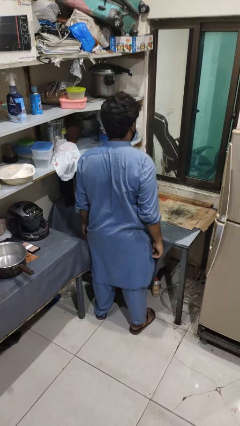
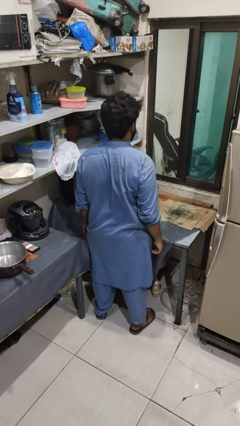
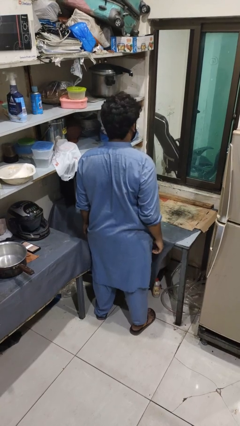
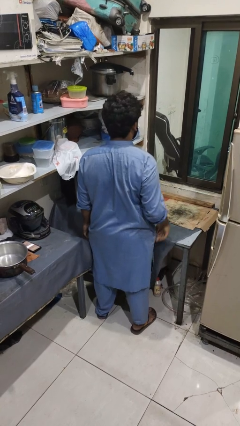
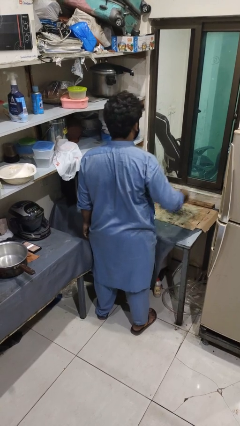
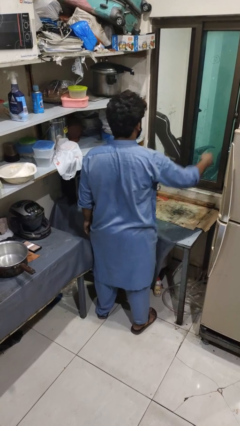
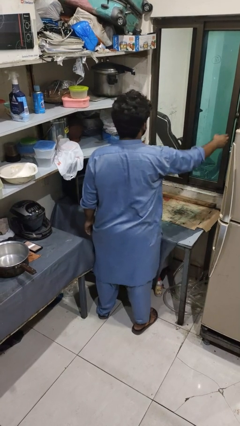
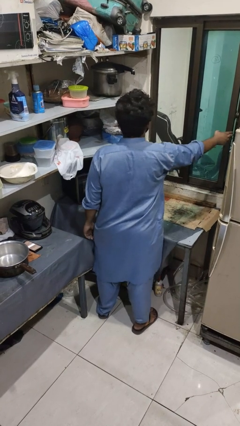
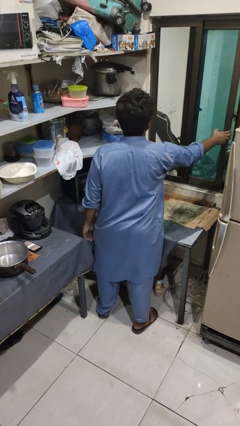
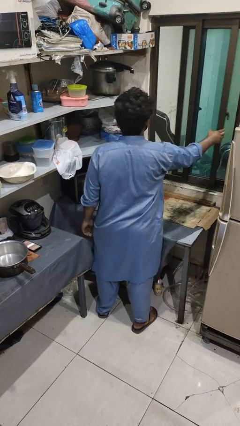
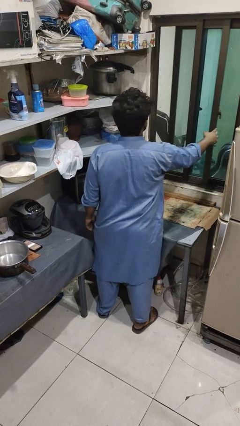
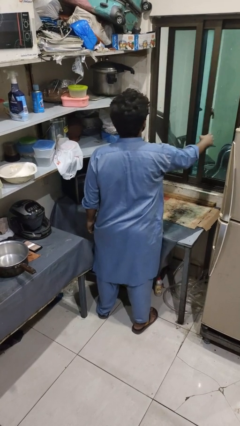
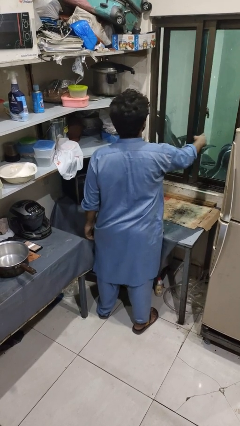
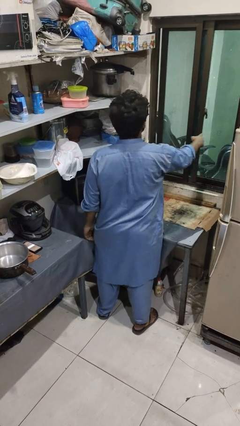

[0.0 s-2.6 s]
person closes home window

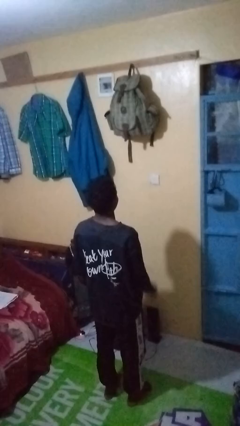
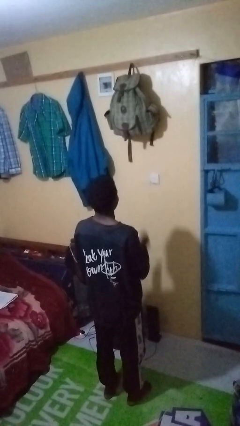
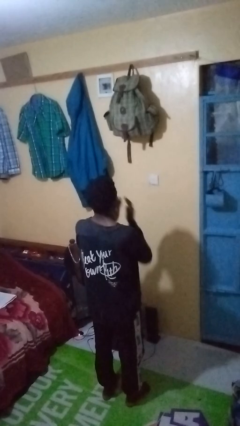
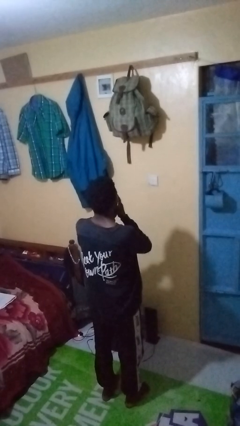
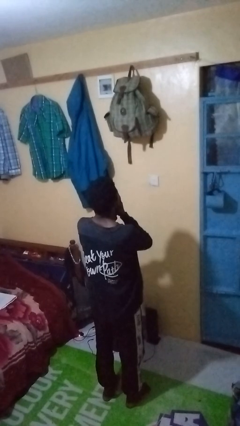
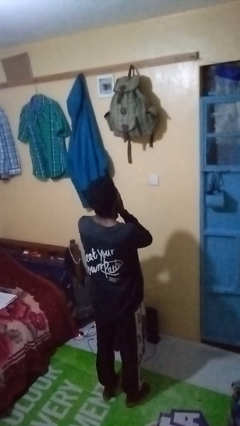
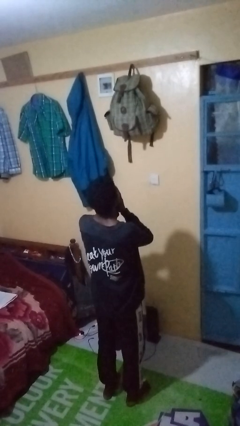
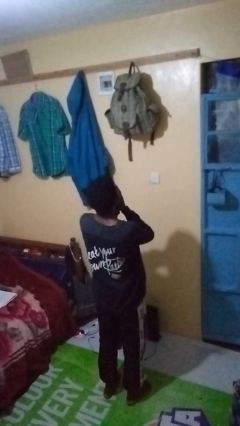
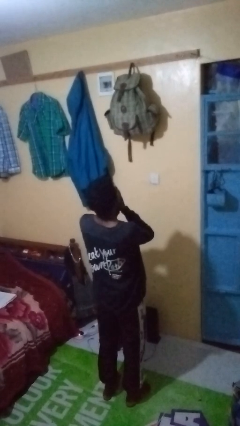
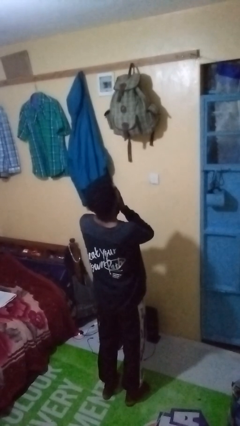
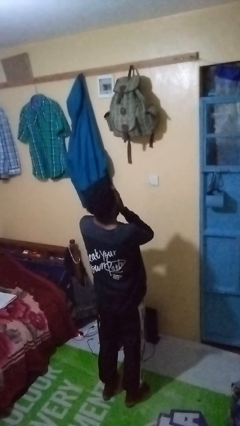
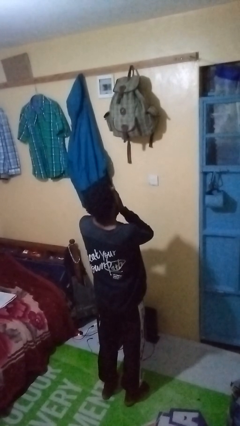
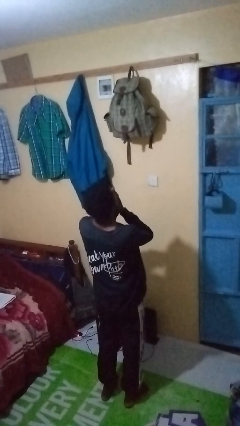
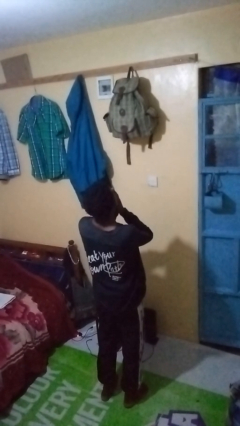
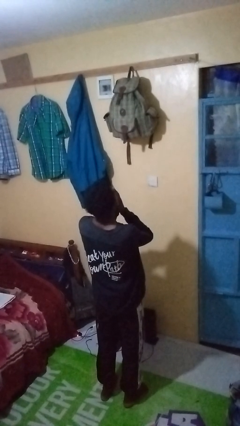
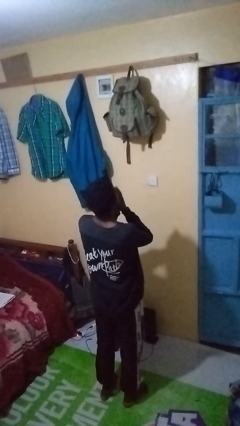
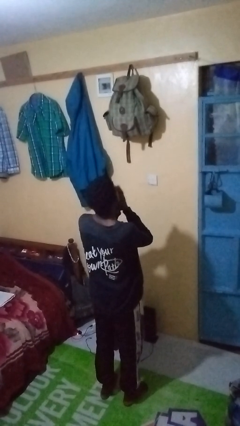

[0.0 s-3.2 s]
person yawns

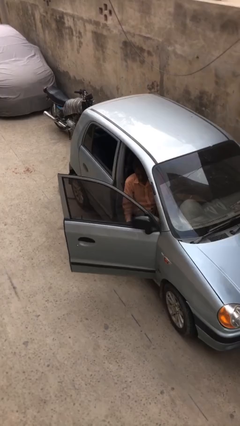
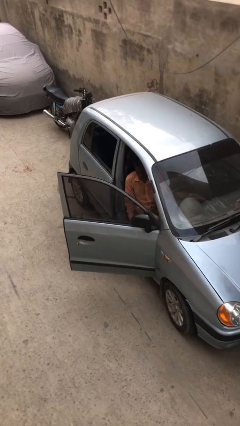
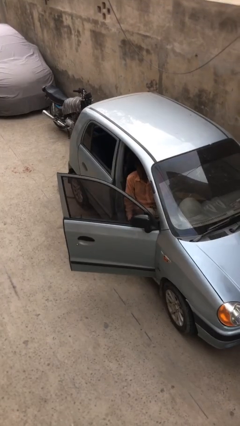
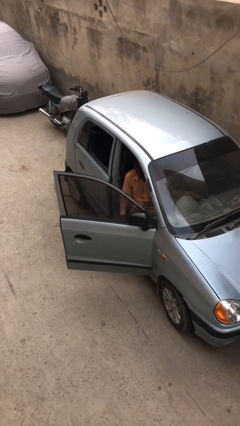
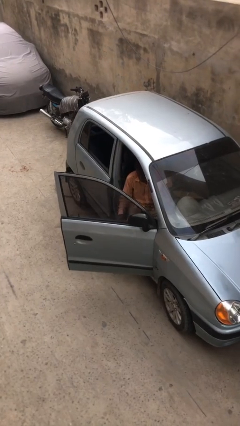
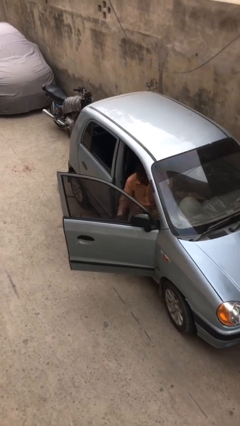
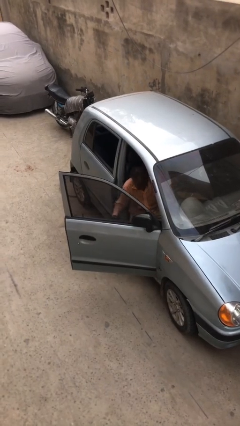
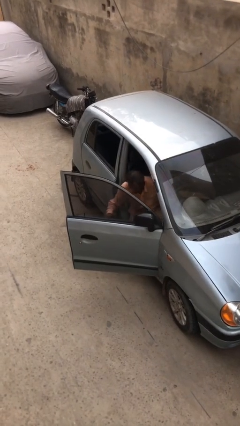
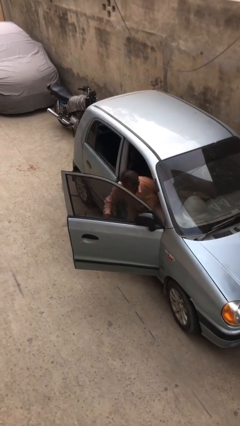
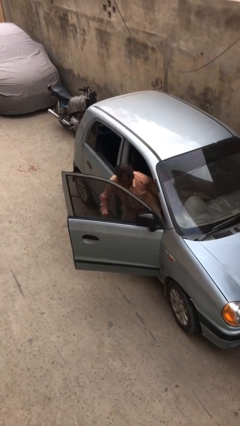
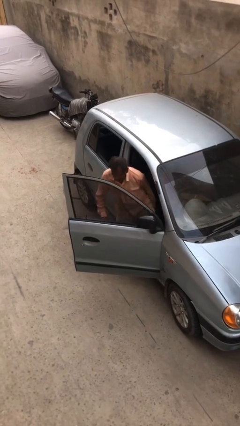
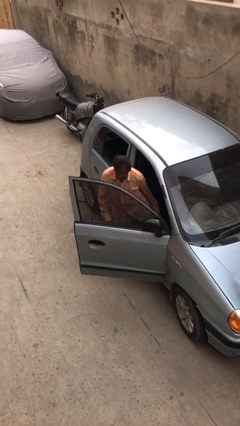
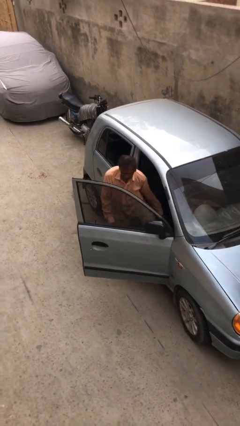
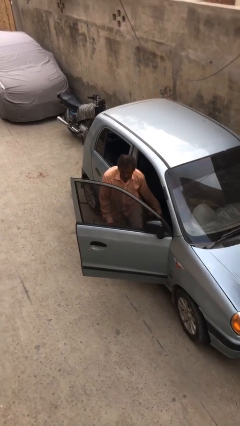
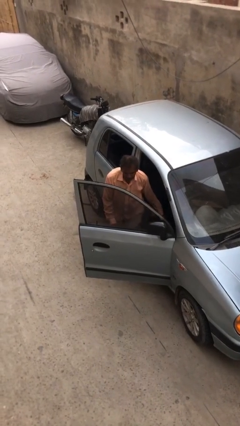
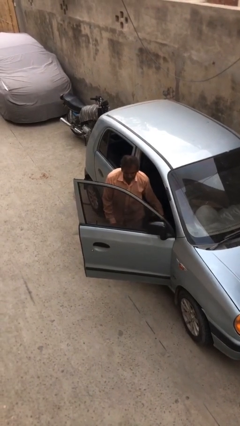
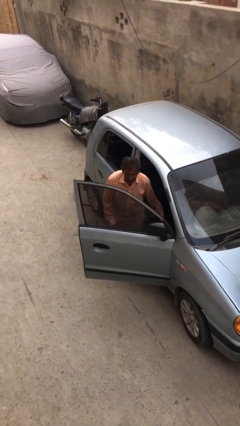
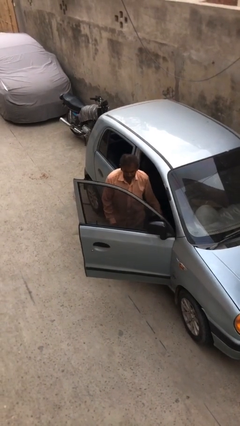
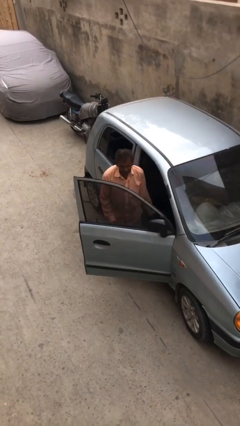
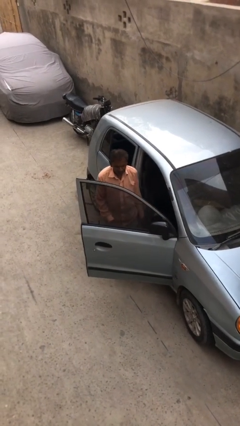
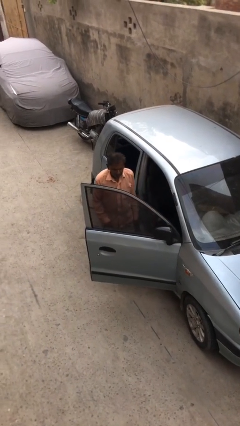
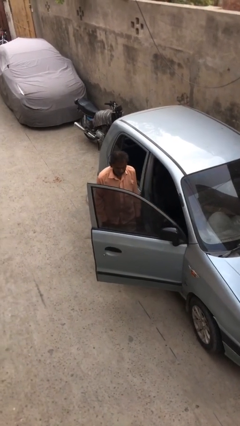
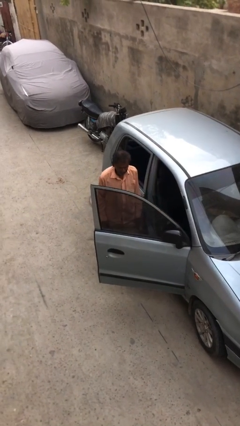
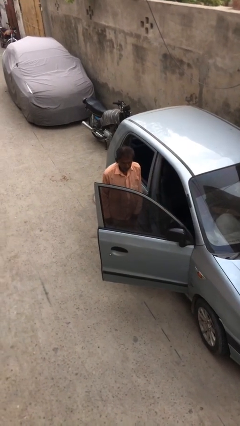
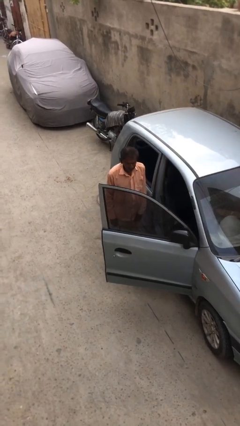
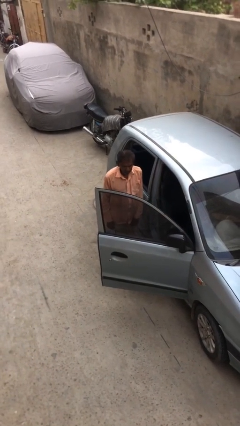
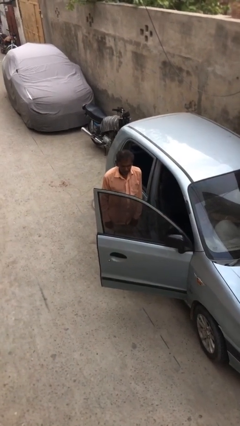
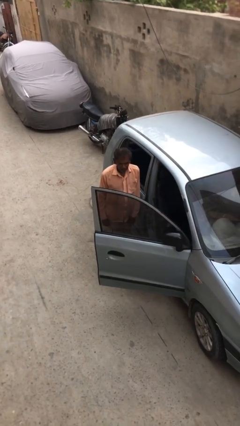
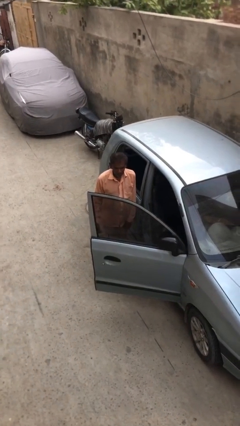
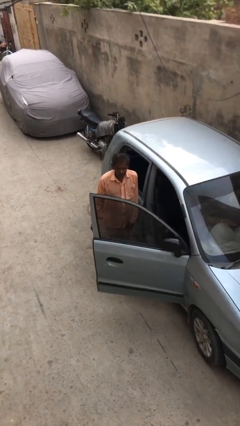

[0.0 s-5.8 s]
person exits car

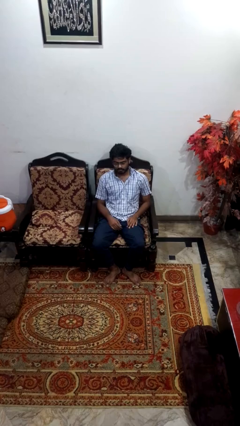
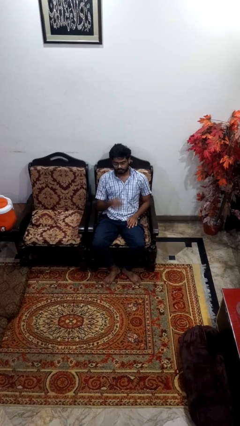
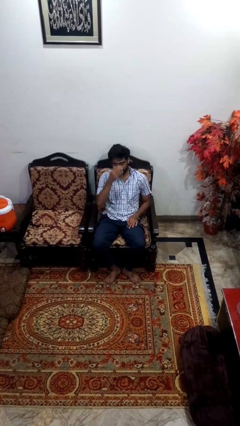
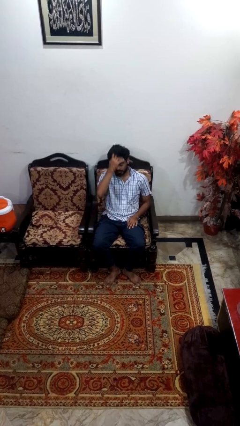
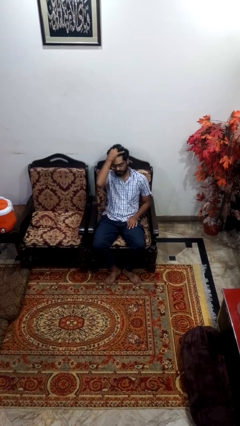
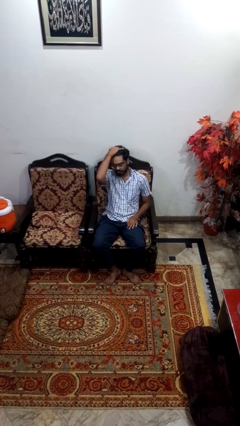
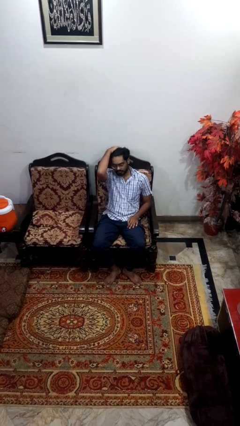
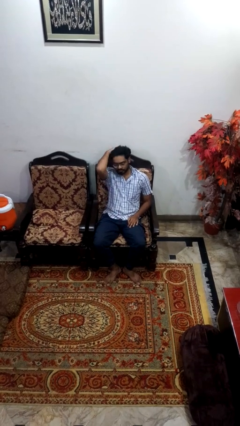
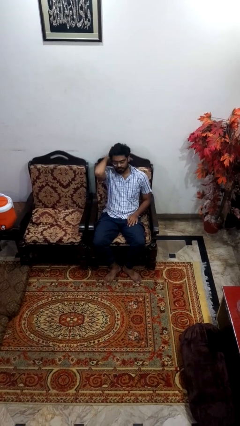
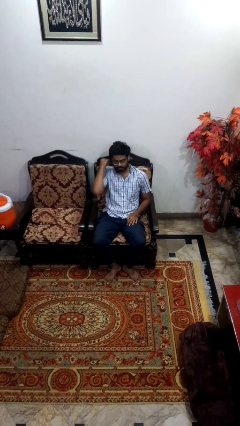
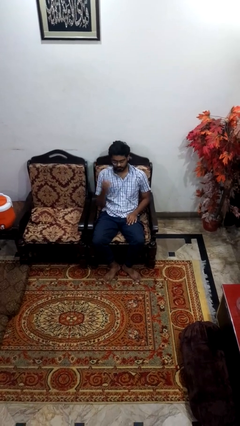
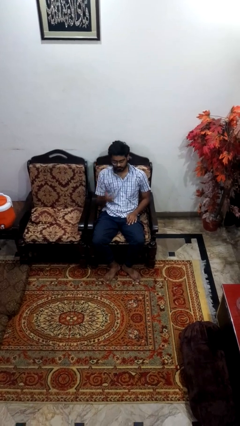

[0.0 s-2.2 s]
person strokes hair

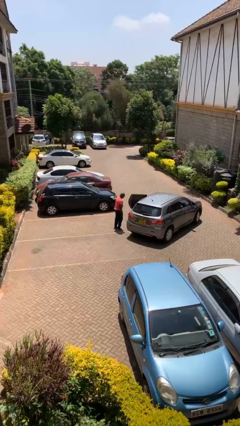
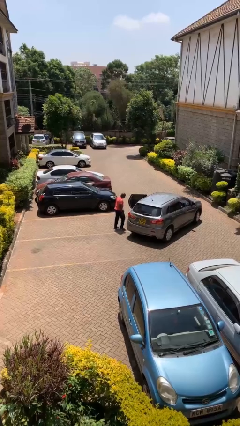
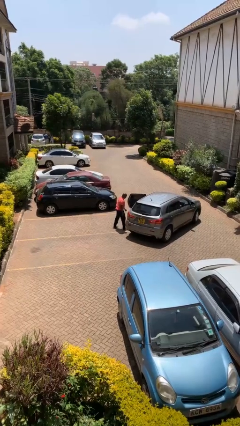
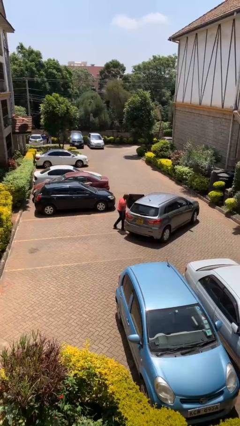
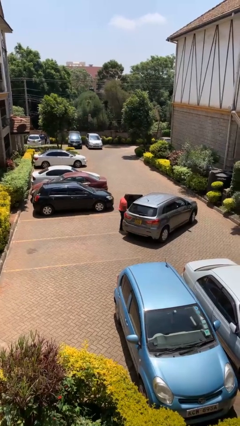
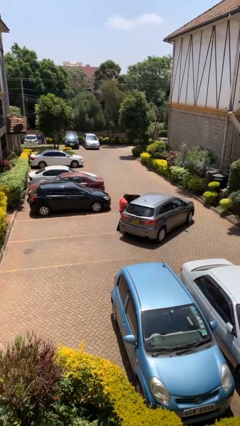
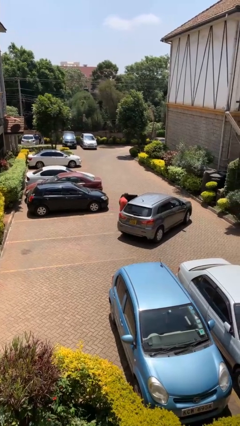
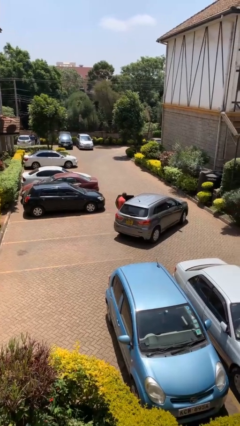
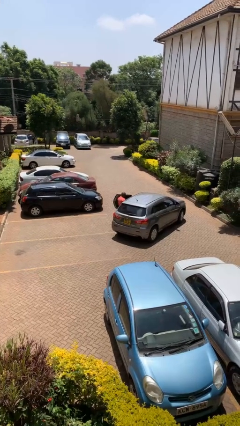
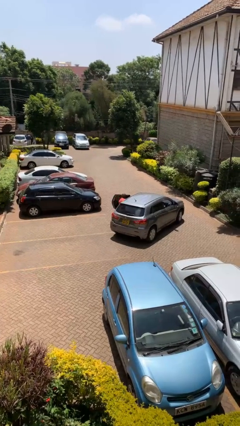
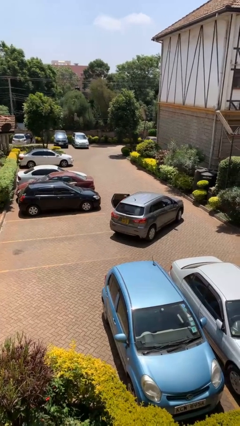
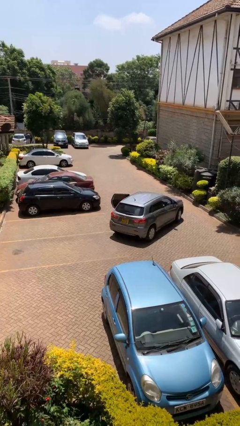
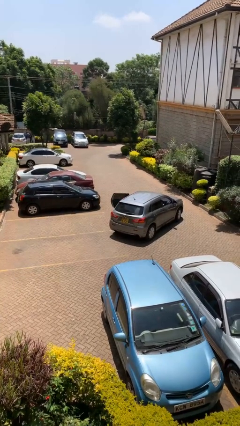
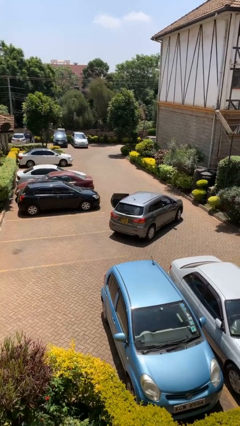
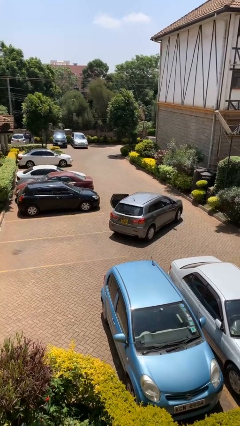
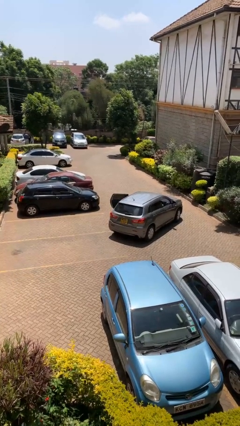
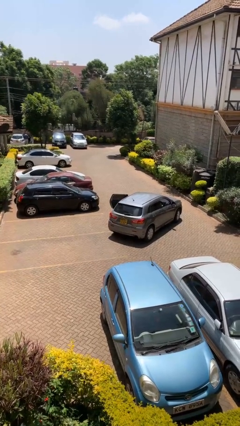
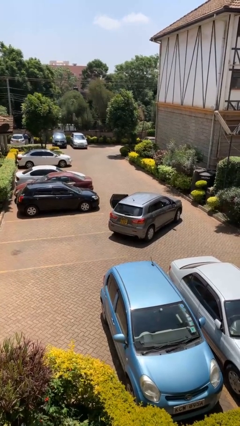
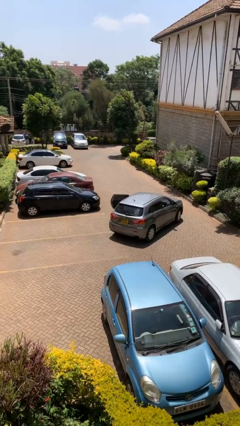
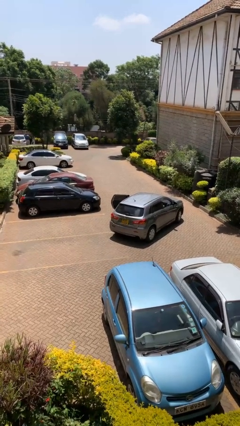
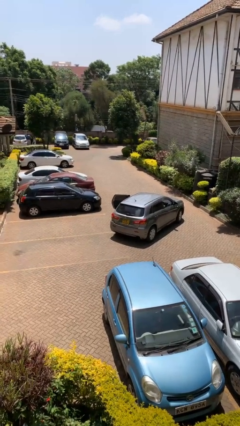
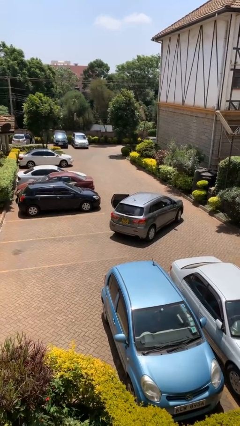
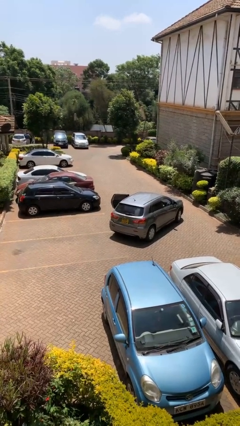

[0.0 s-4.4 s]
person enters car
